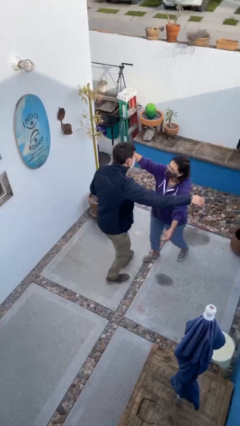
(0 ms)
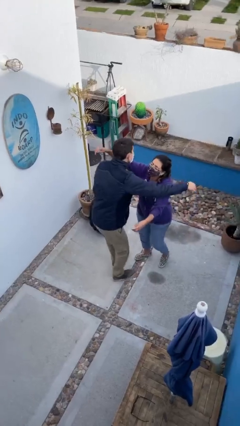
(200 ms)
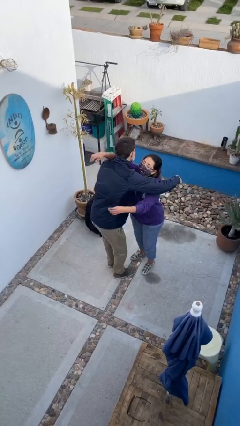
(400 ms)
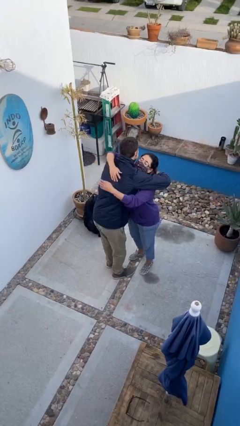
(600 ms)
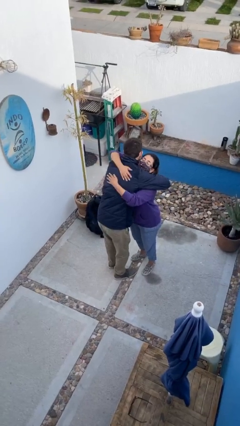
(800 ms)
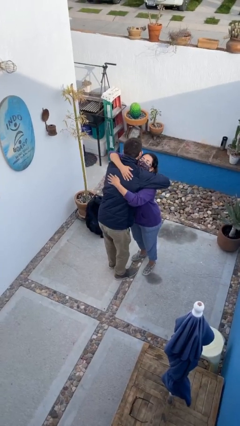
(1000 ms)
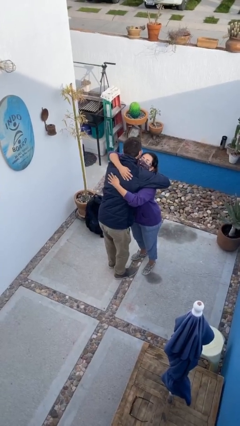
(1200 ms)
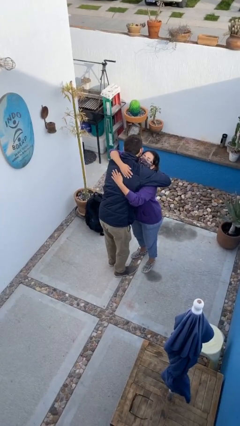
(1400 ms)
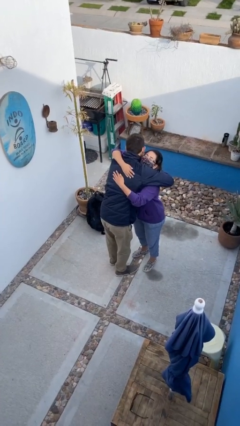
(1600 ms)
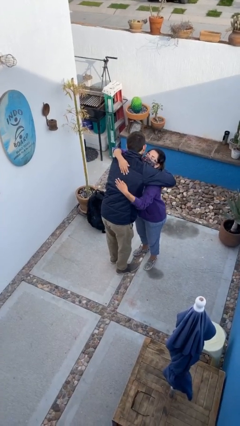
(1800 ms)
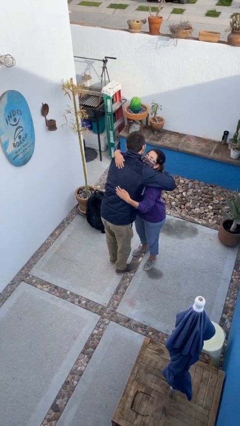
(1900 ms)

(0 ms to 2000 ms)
person embraces person

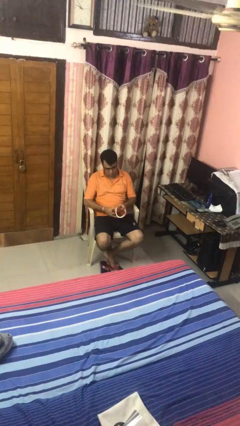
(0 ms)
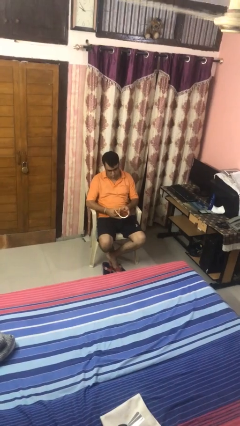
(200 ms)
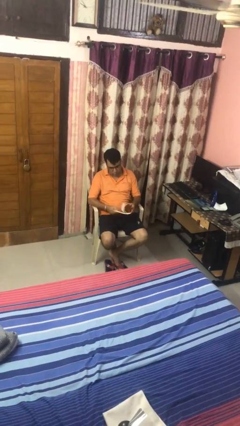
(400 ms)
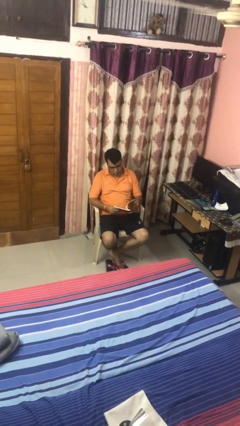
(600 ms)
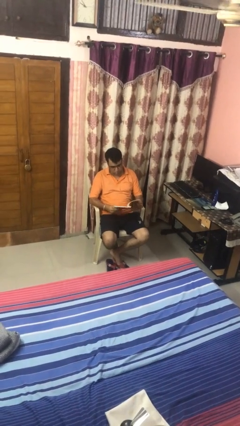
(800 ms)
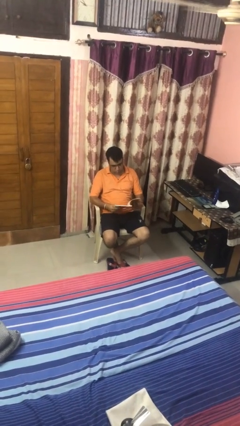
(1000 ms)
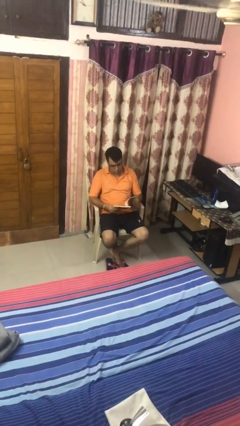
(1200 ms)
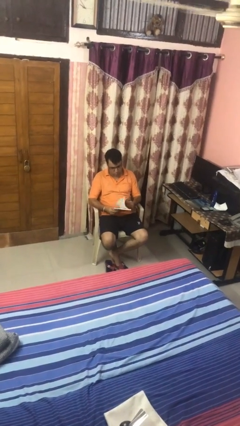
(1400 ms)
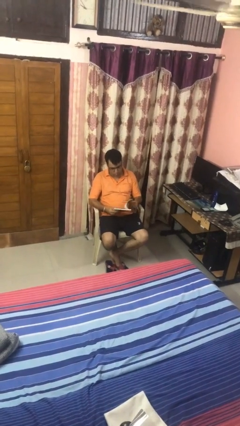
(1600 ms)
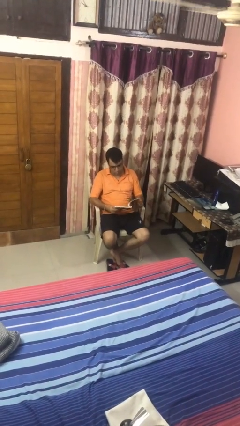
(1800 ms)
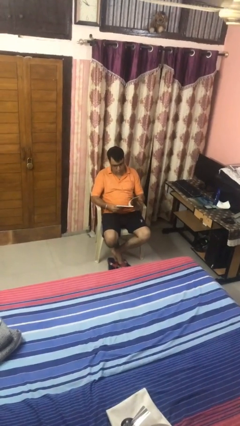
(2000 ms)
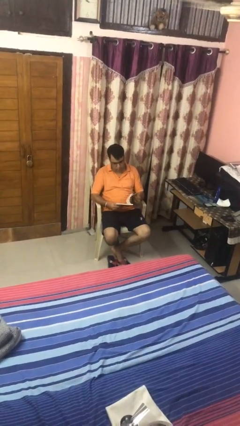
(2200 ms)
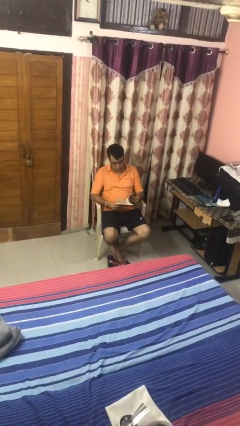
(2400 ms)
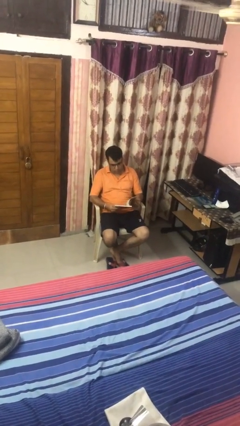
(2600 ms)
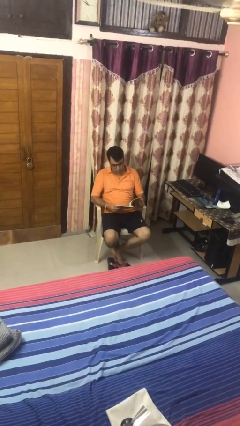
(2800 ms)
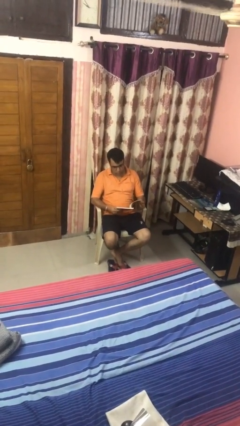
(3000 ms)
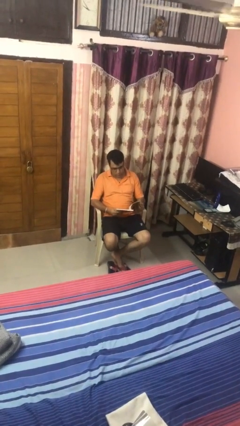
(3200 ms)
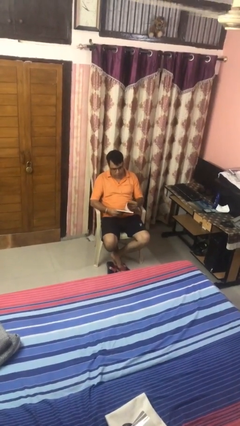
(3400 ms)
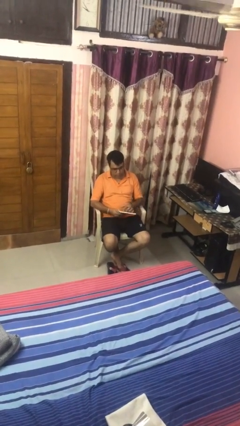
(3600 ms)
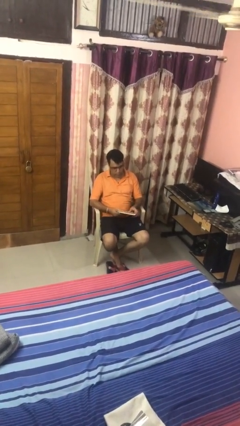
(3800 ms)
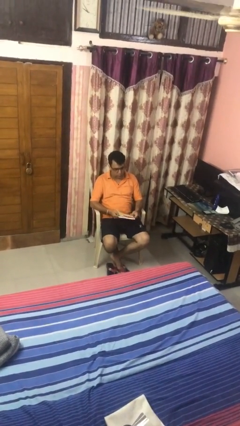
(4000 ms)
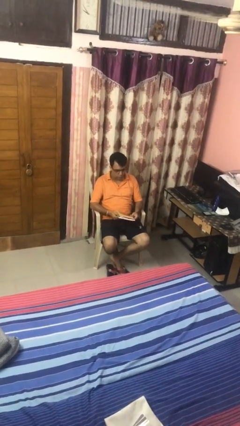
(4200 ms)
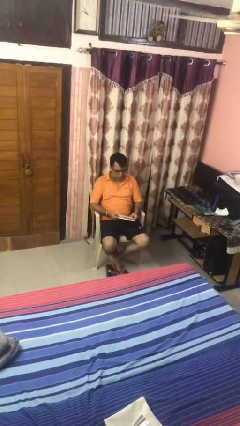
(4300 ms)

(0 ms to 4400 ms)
person reads magazine

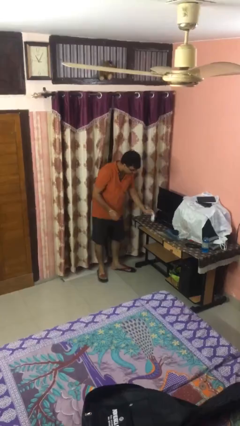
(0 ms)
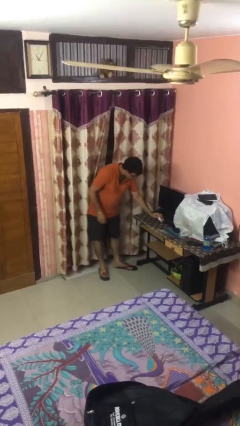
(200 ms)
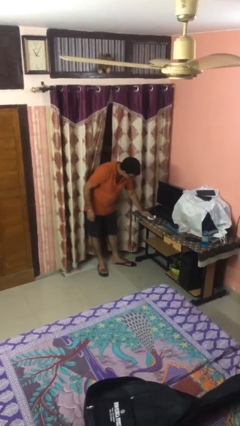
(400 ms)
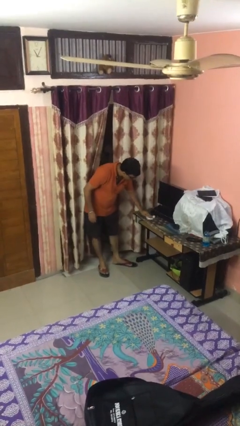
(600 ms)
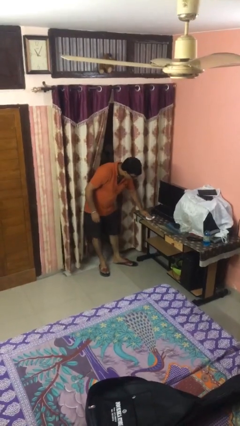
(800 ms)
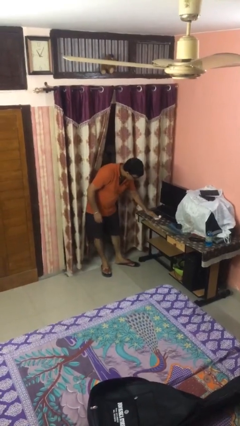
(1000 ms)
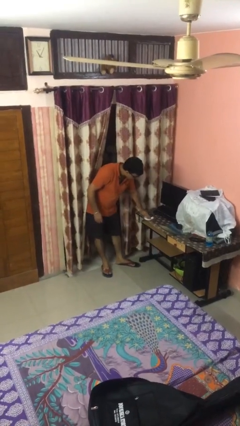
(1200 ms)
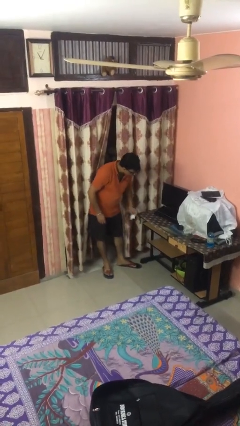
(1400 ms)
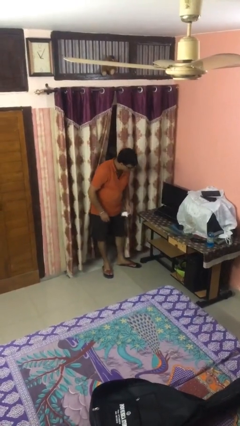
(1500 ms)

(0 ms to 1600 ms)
person cleans table with rag

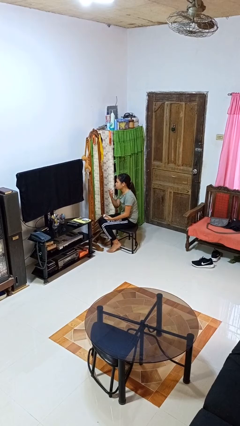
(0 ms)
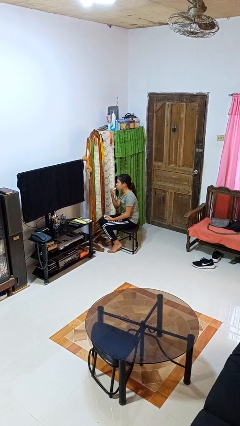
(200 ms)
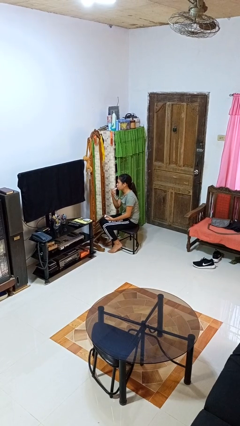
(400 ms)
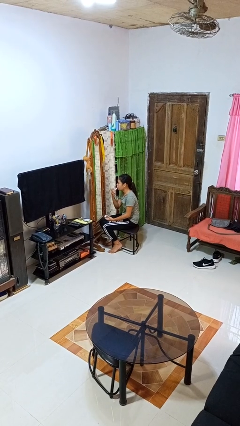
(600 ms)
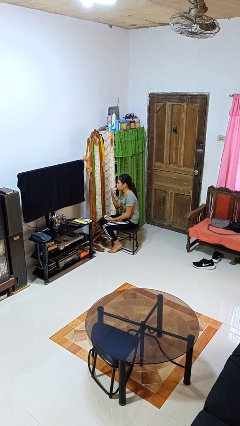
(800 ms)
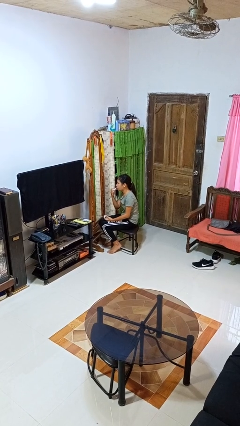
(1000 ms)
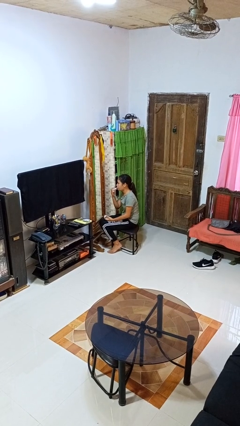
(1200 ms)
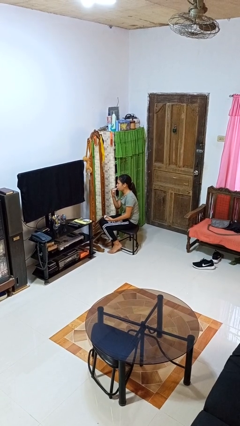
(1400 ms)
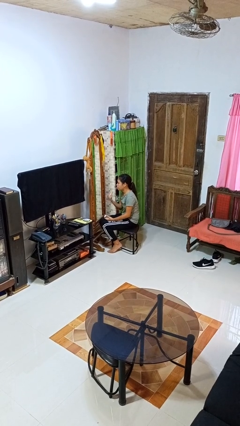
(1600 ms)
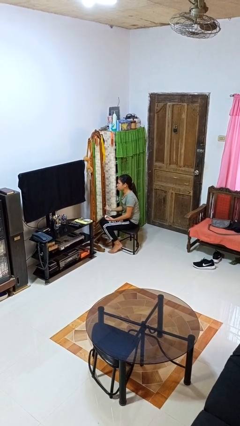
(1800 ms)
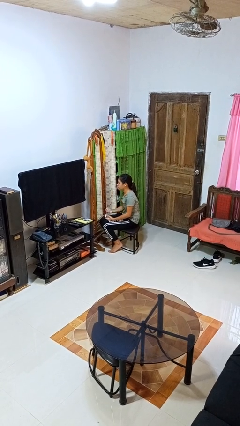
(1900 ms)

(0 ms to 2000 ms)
person applies lip makeup

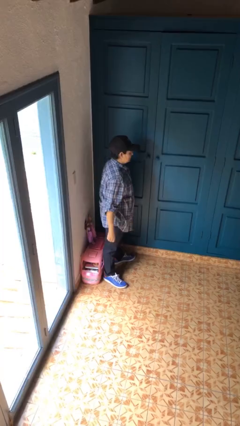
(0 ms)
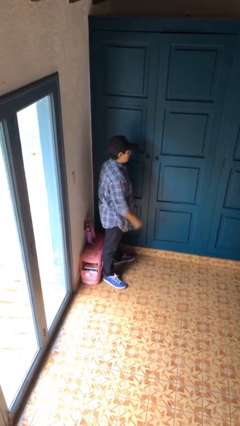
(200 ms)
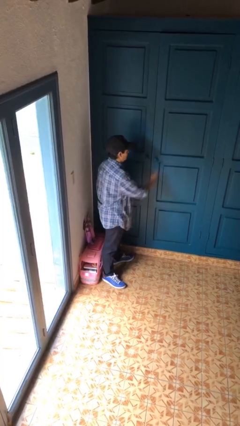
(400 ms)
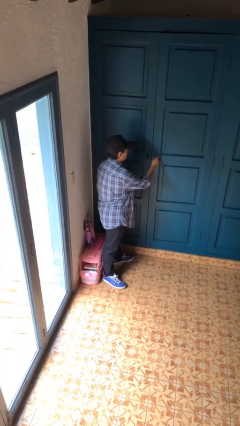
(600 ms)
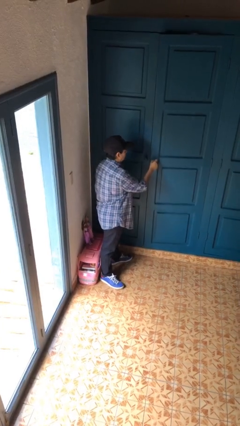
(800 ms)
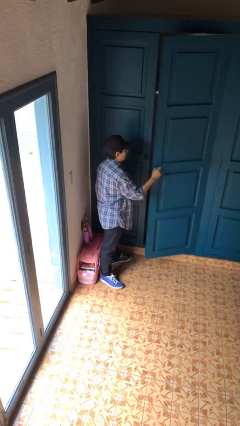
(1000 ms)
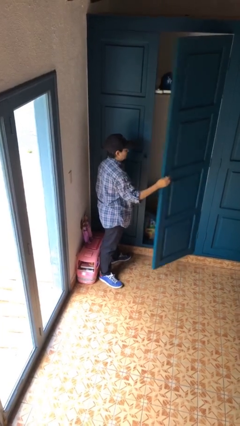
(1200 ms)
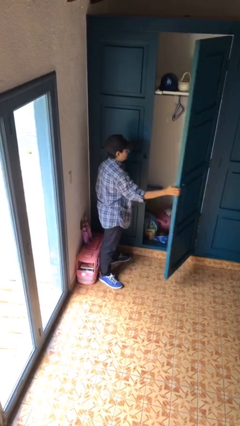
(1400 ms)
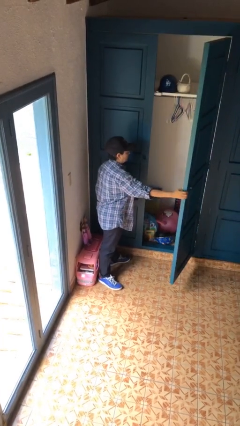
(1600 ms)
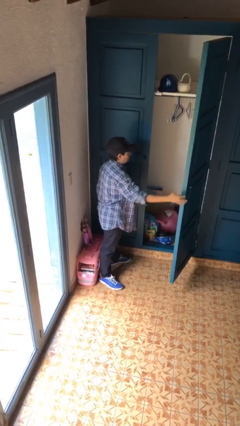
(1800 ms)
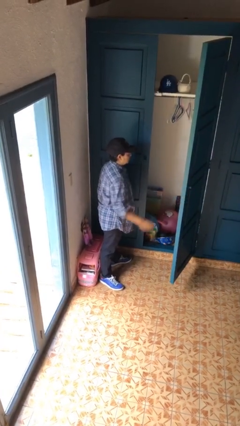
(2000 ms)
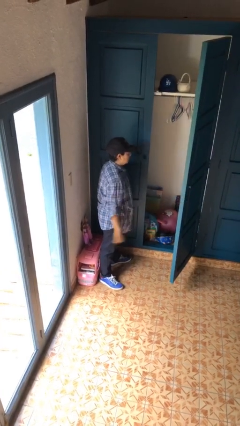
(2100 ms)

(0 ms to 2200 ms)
person opens closet door

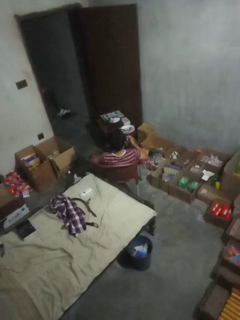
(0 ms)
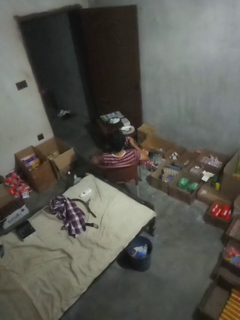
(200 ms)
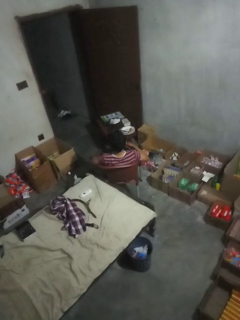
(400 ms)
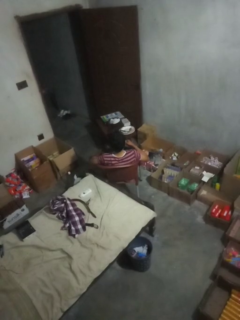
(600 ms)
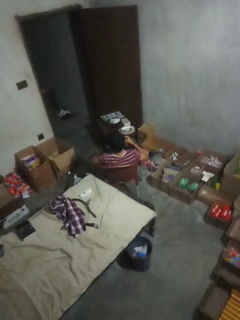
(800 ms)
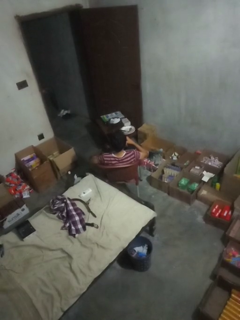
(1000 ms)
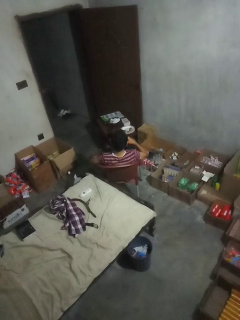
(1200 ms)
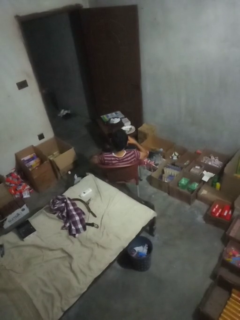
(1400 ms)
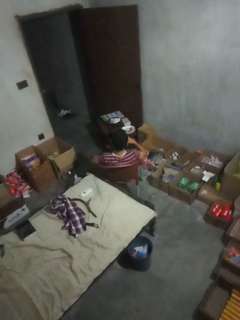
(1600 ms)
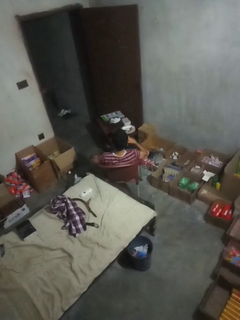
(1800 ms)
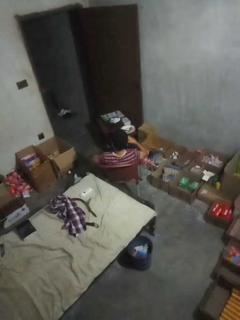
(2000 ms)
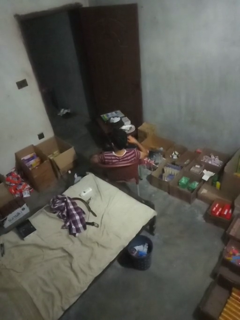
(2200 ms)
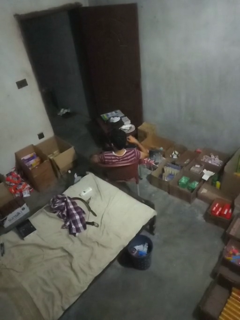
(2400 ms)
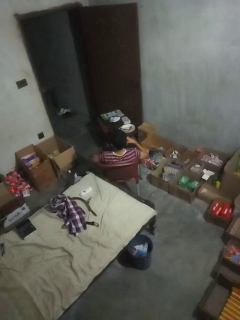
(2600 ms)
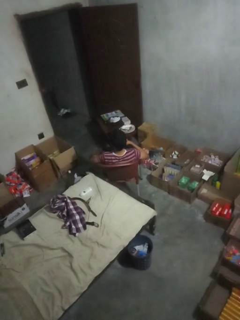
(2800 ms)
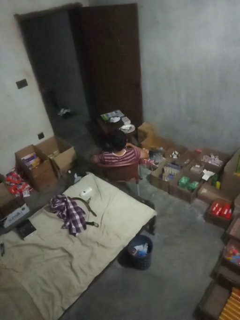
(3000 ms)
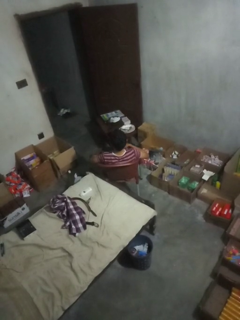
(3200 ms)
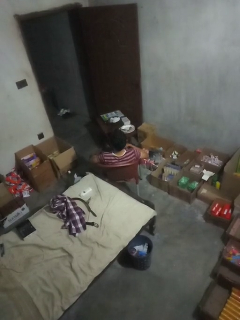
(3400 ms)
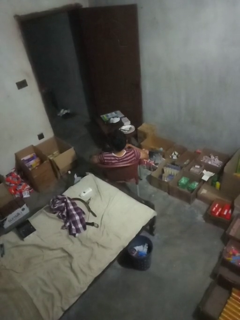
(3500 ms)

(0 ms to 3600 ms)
person brushes teeth

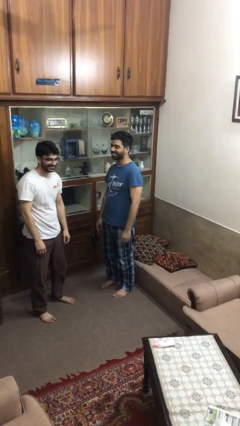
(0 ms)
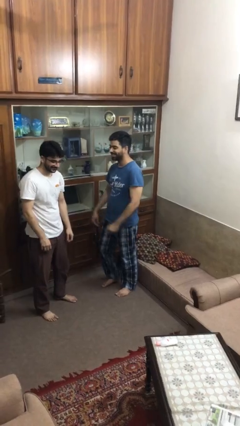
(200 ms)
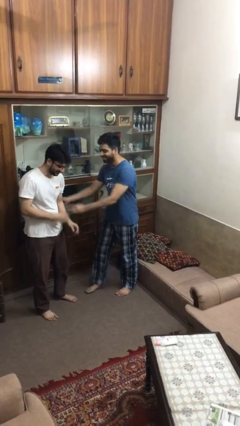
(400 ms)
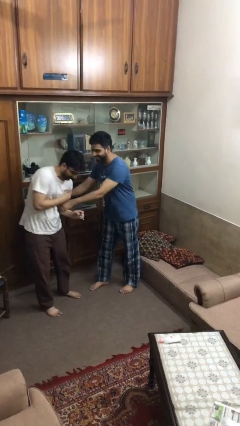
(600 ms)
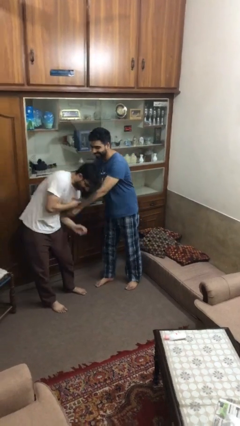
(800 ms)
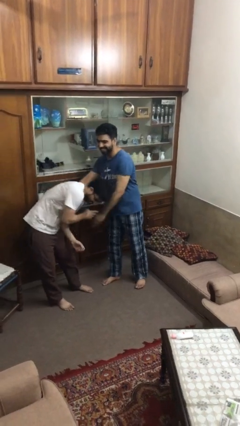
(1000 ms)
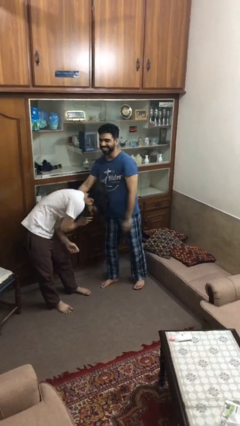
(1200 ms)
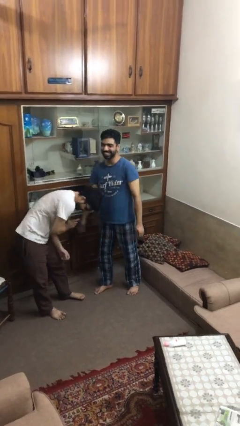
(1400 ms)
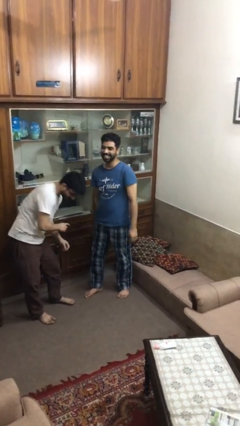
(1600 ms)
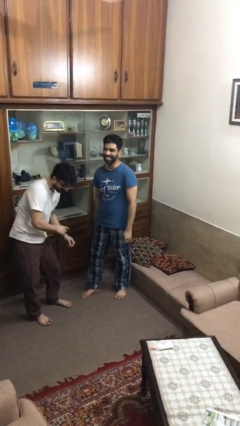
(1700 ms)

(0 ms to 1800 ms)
person tickles person
